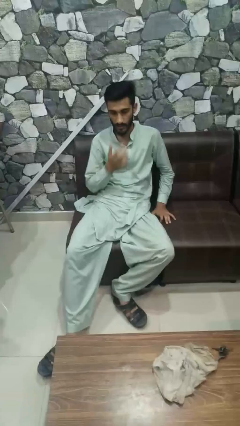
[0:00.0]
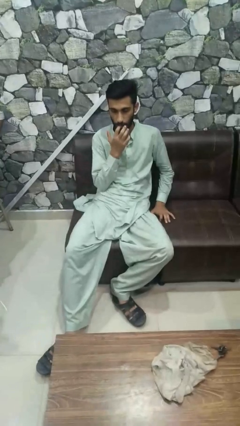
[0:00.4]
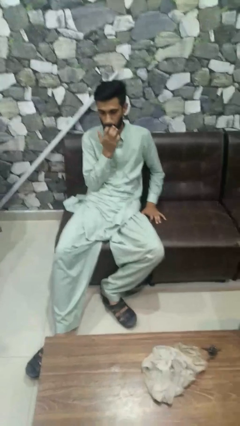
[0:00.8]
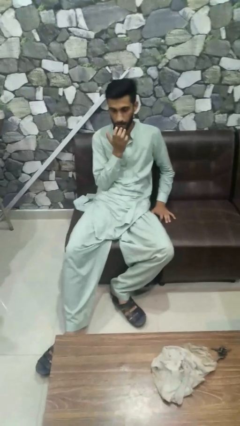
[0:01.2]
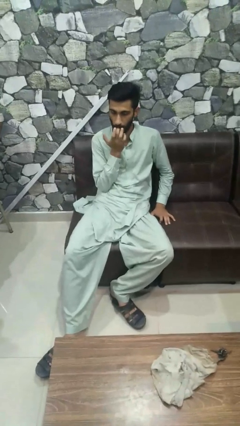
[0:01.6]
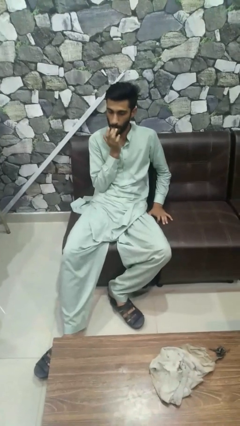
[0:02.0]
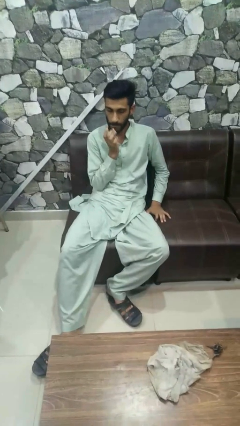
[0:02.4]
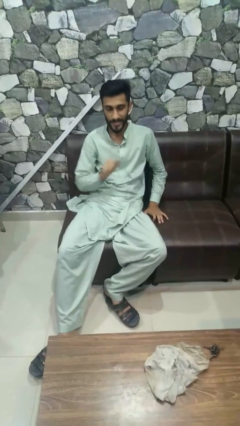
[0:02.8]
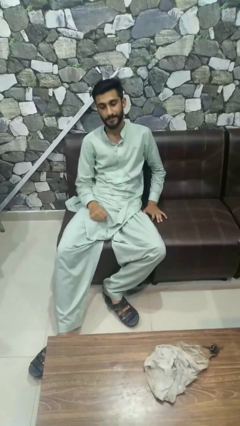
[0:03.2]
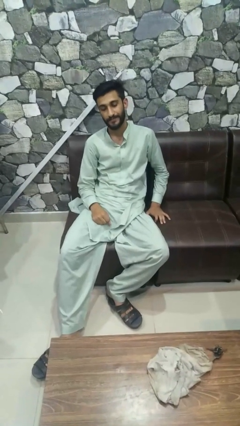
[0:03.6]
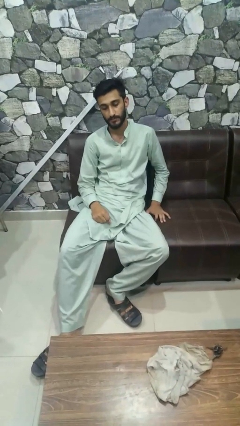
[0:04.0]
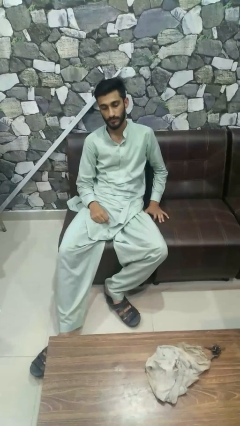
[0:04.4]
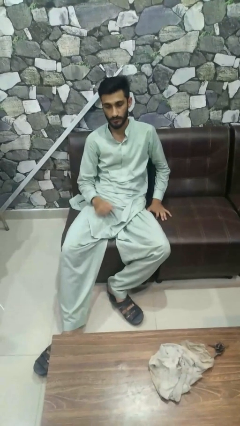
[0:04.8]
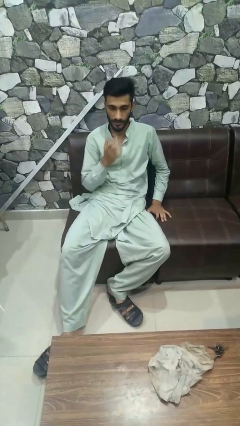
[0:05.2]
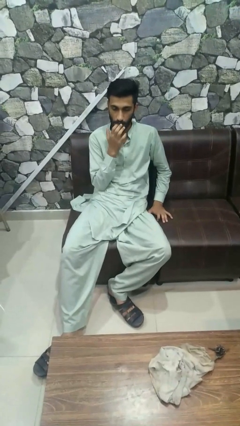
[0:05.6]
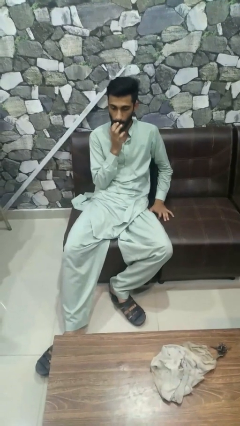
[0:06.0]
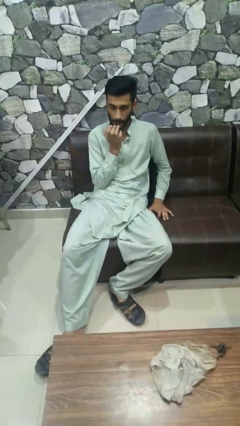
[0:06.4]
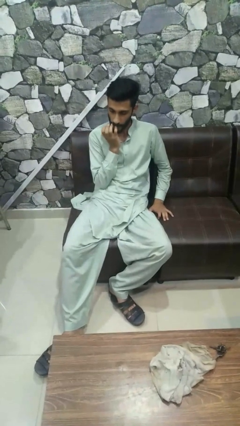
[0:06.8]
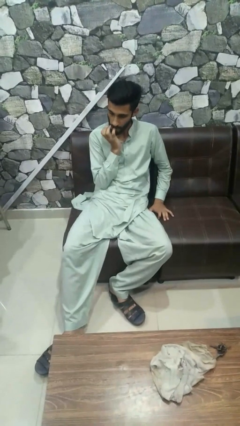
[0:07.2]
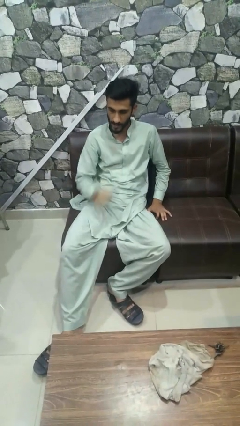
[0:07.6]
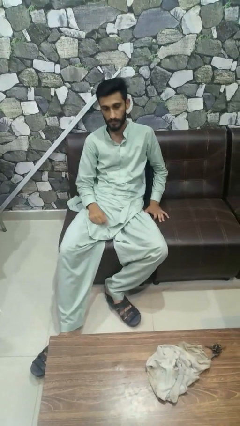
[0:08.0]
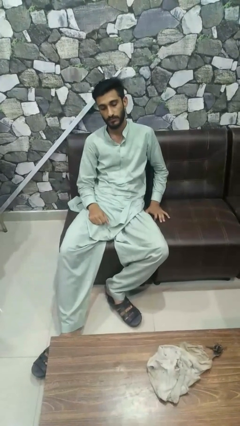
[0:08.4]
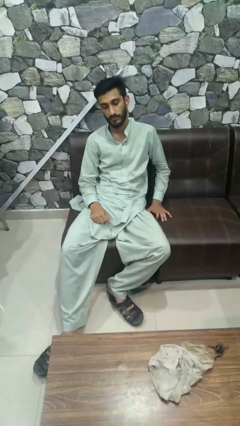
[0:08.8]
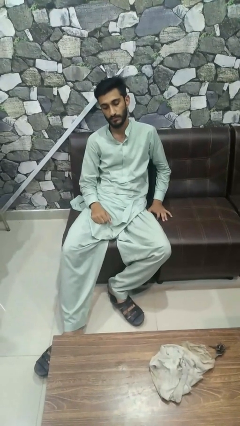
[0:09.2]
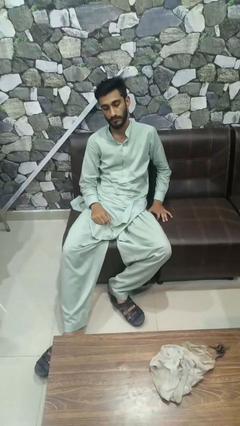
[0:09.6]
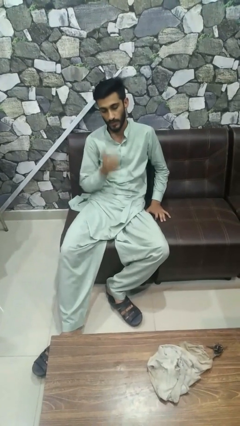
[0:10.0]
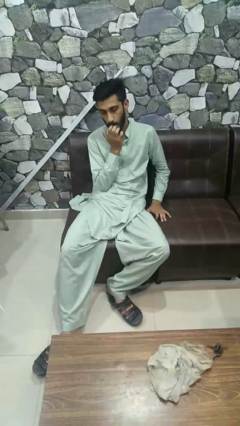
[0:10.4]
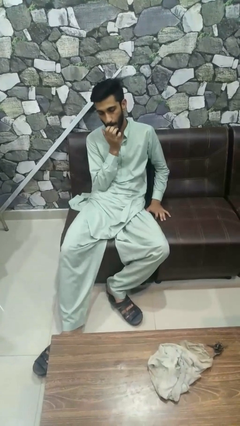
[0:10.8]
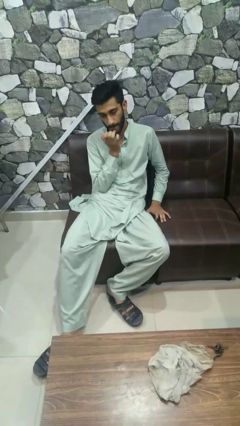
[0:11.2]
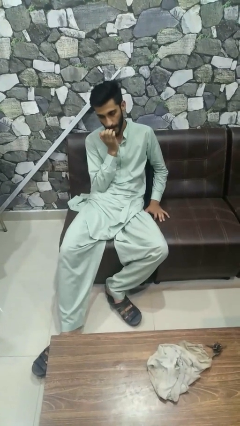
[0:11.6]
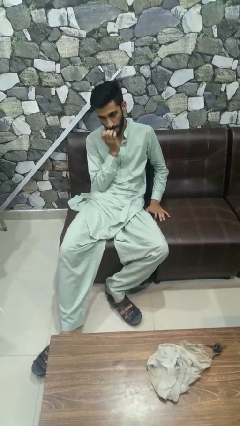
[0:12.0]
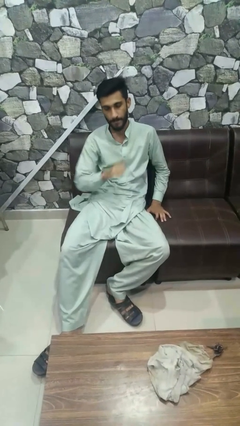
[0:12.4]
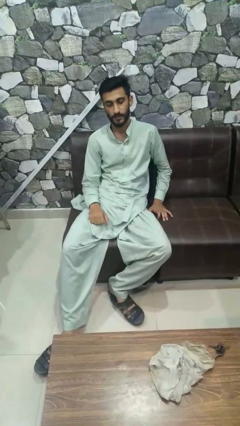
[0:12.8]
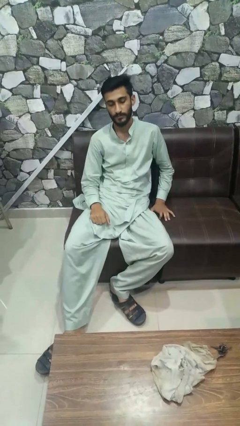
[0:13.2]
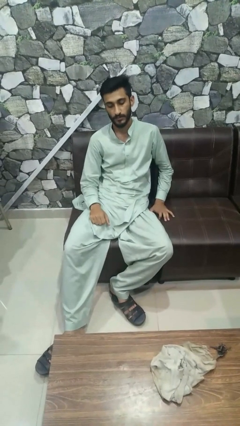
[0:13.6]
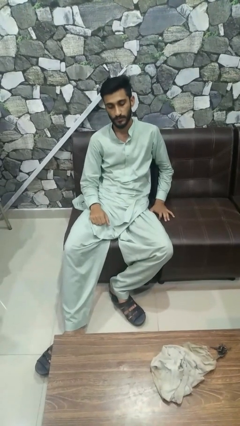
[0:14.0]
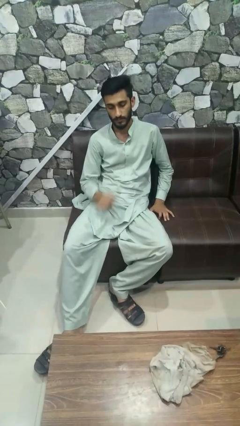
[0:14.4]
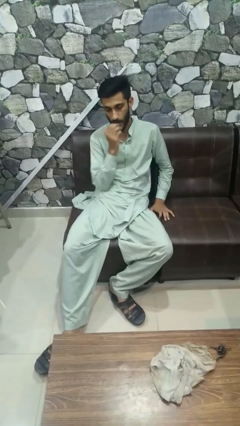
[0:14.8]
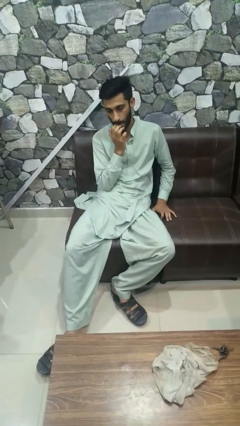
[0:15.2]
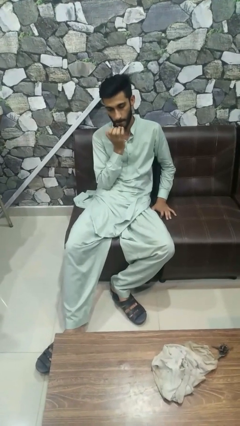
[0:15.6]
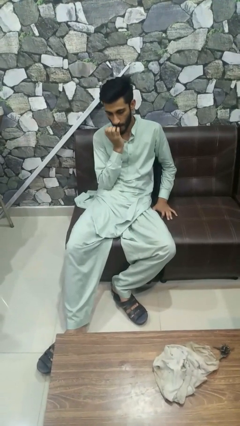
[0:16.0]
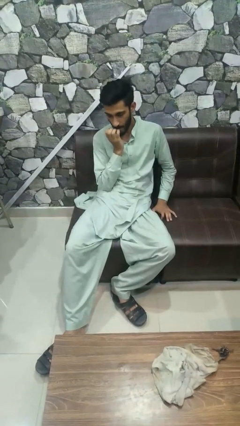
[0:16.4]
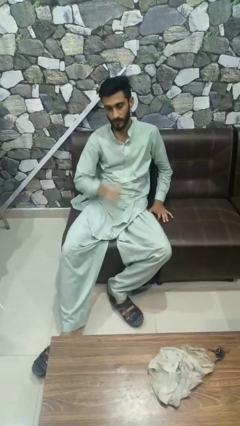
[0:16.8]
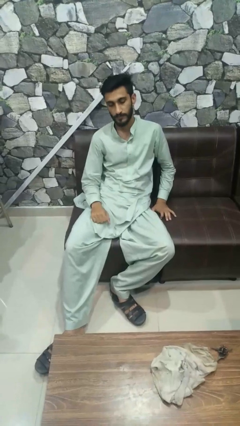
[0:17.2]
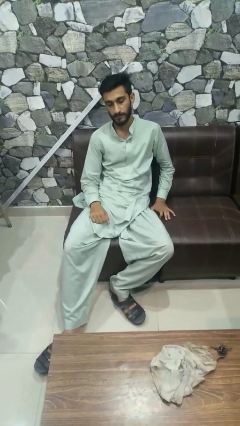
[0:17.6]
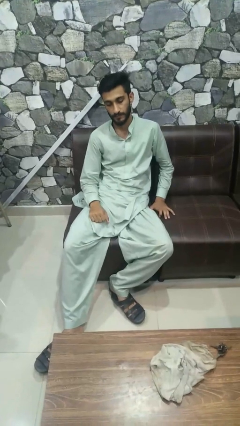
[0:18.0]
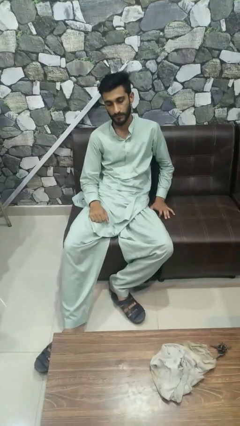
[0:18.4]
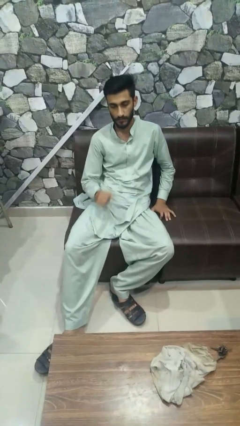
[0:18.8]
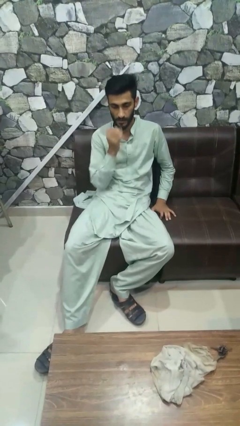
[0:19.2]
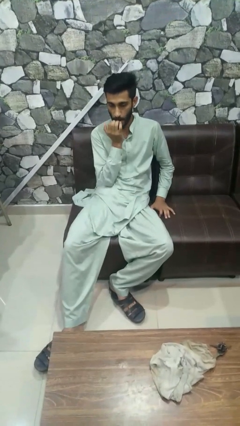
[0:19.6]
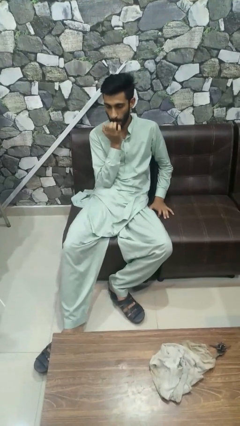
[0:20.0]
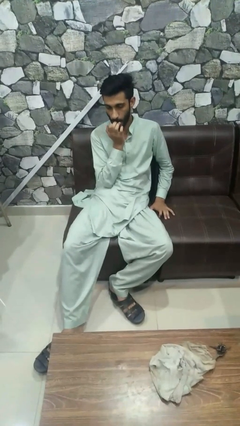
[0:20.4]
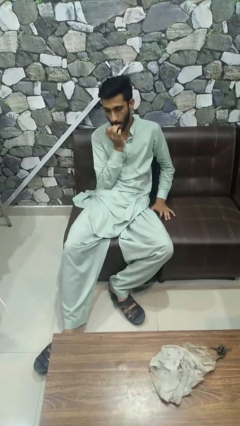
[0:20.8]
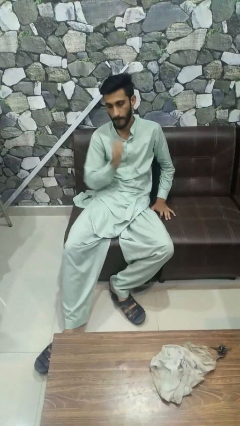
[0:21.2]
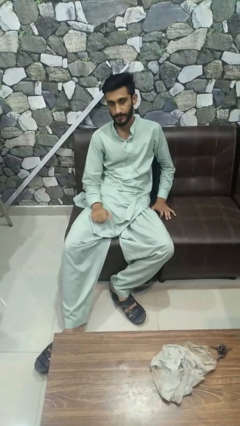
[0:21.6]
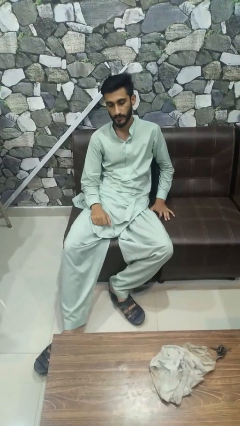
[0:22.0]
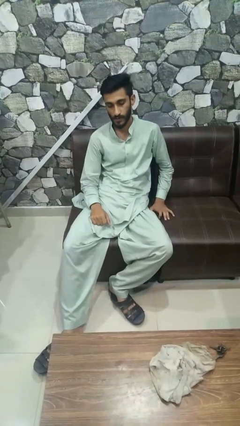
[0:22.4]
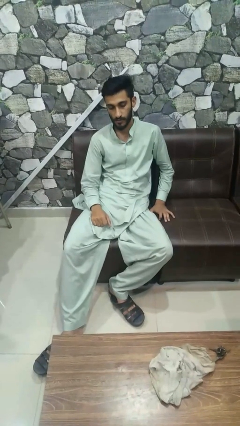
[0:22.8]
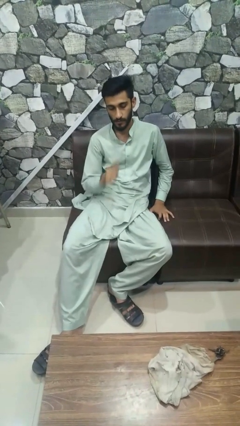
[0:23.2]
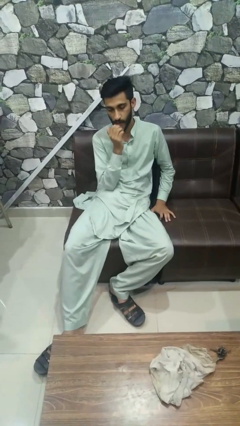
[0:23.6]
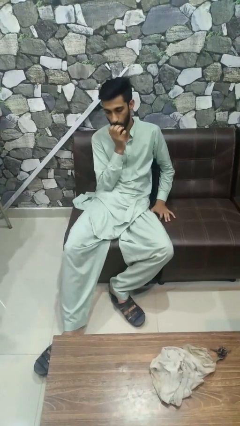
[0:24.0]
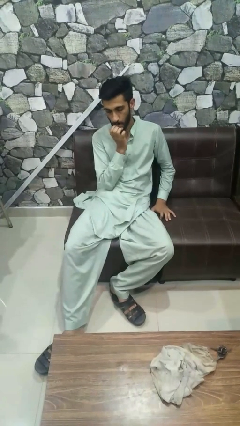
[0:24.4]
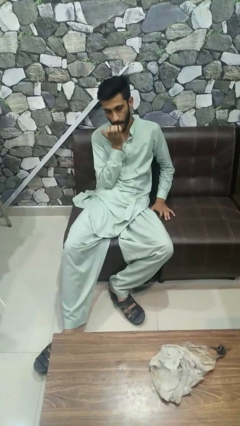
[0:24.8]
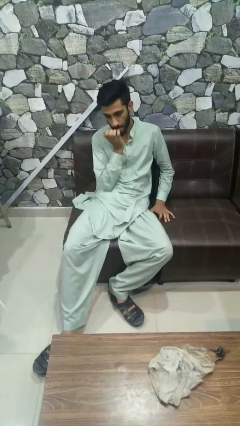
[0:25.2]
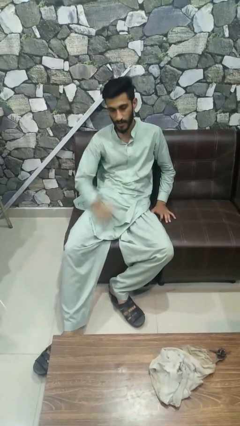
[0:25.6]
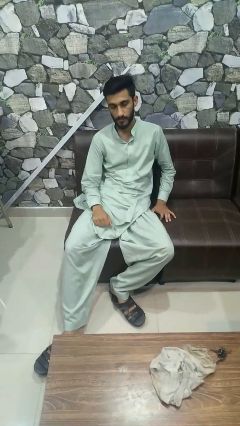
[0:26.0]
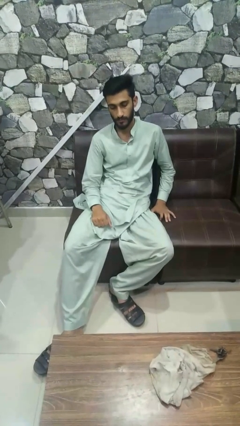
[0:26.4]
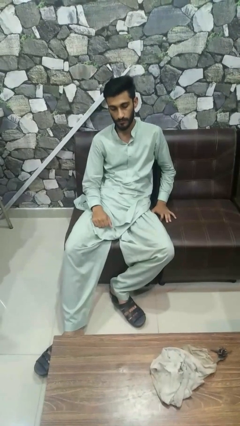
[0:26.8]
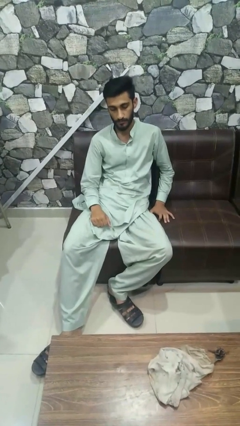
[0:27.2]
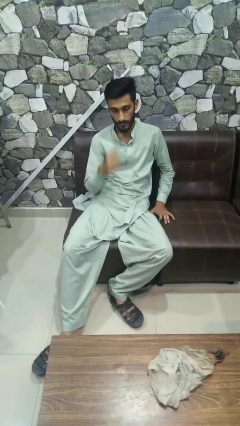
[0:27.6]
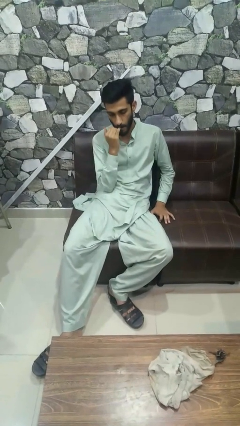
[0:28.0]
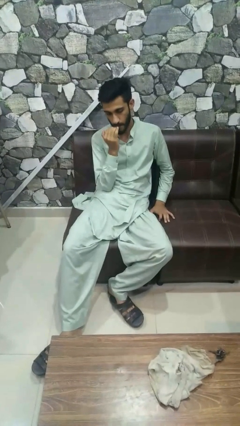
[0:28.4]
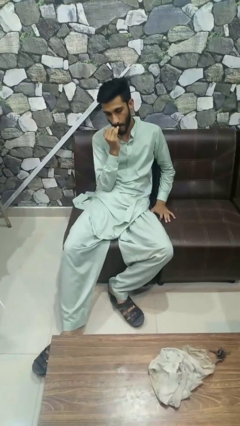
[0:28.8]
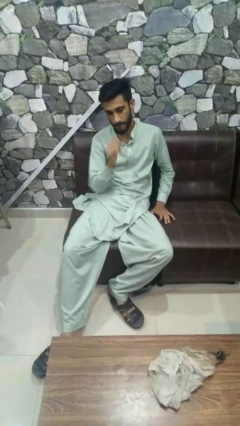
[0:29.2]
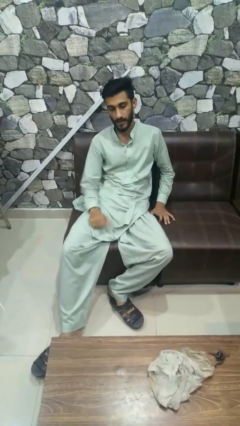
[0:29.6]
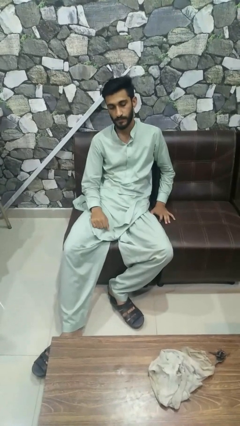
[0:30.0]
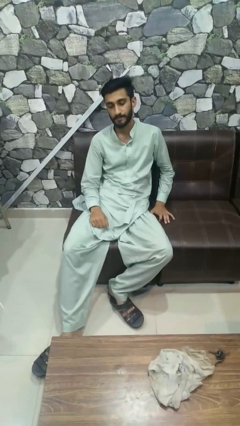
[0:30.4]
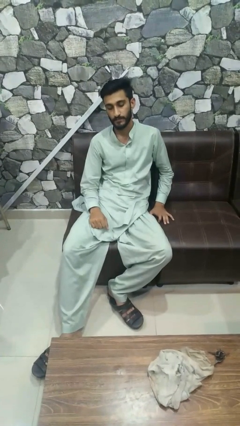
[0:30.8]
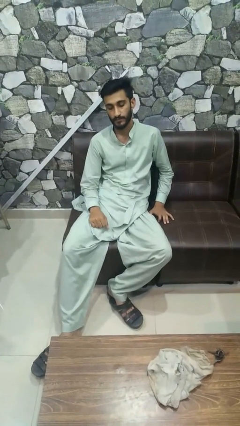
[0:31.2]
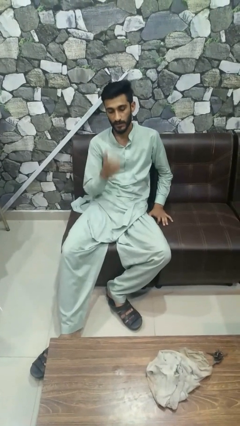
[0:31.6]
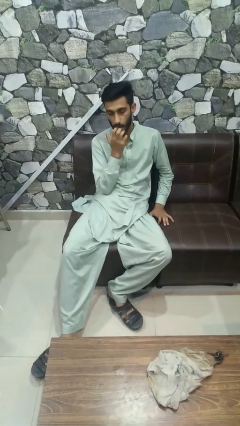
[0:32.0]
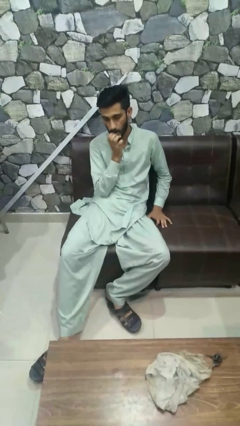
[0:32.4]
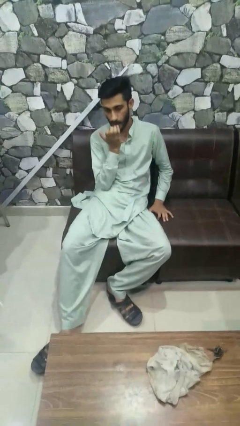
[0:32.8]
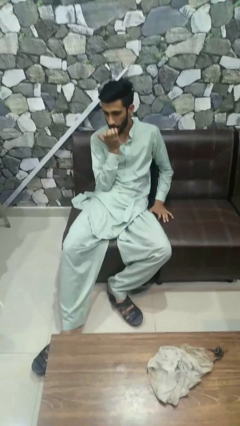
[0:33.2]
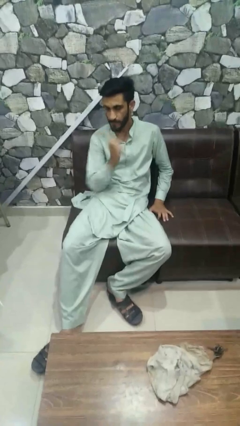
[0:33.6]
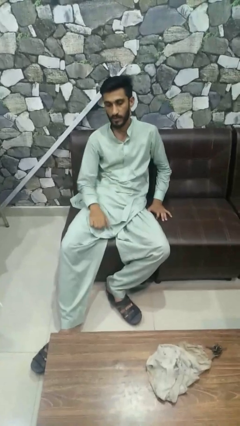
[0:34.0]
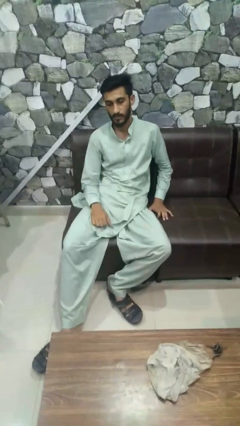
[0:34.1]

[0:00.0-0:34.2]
person licks fingers

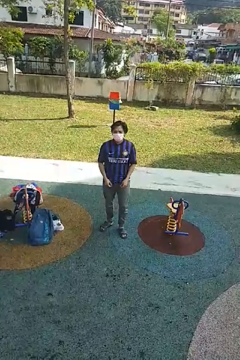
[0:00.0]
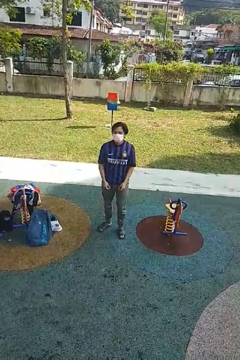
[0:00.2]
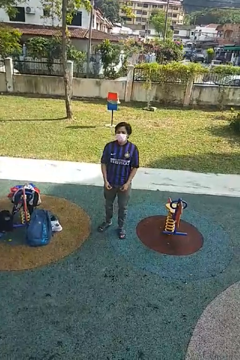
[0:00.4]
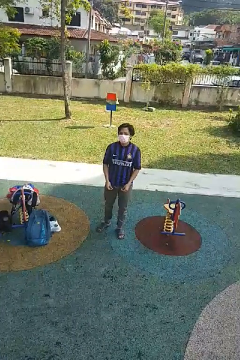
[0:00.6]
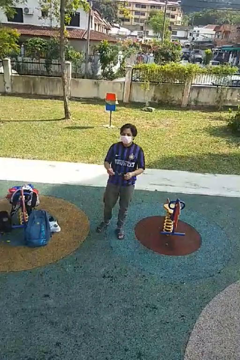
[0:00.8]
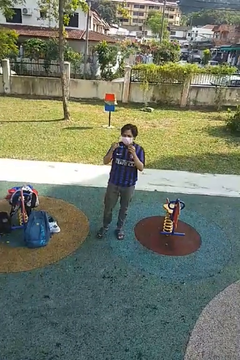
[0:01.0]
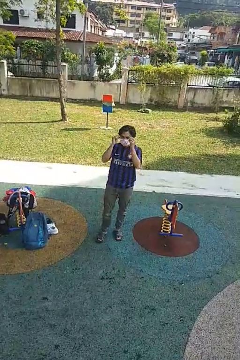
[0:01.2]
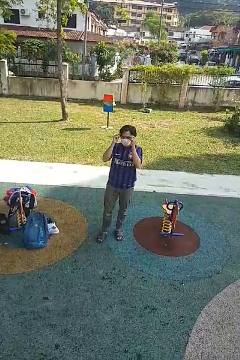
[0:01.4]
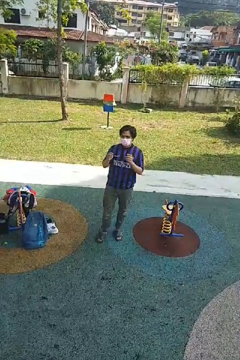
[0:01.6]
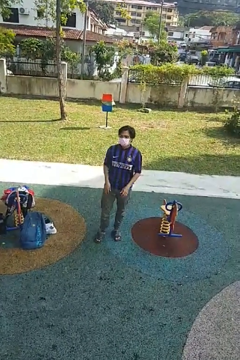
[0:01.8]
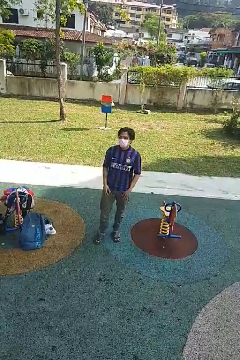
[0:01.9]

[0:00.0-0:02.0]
person puts on glasses
